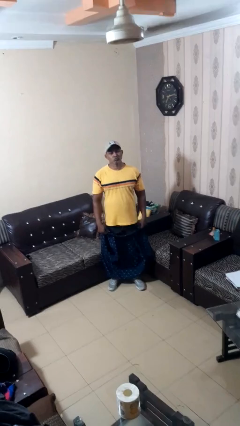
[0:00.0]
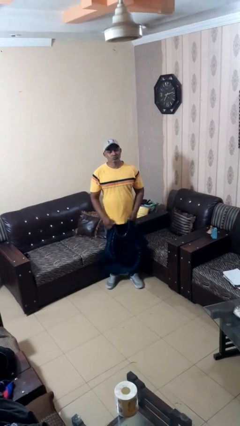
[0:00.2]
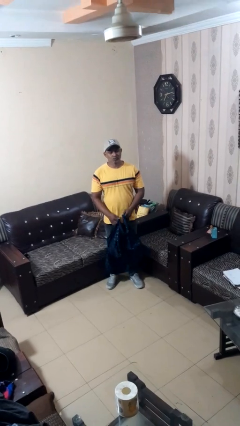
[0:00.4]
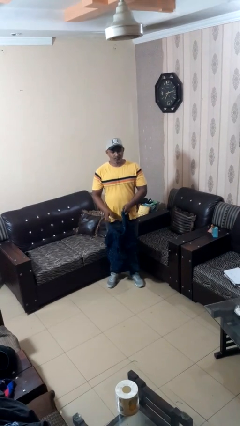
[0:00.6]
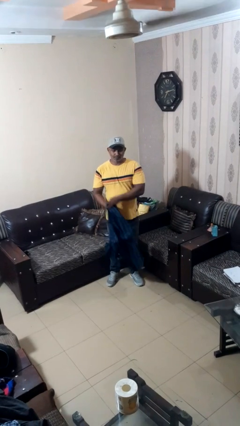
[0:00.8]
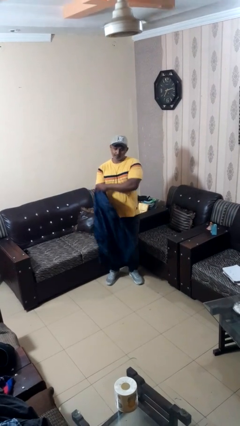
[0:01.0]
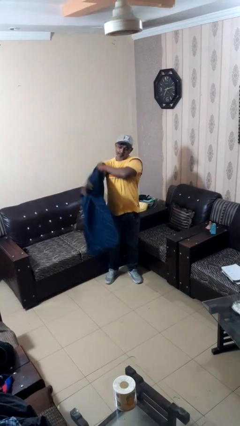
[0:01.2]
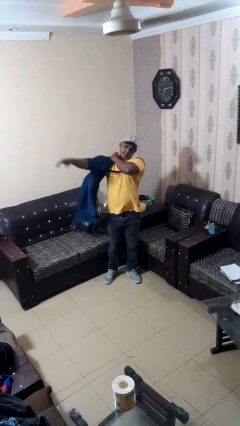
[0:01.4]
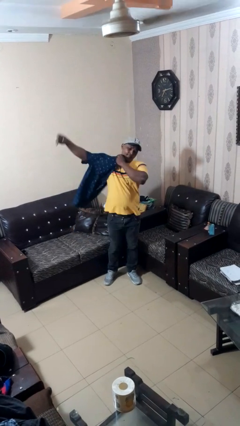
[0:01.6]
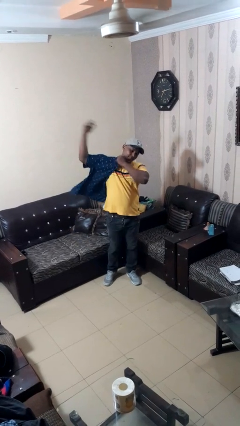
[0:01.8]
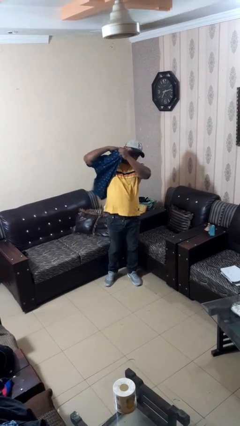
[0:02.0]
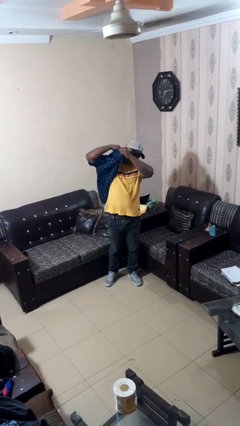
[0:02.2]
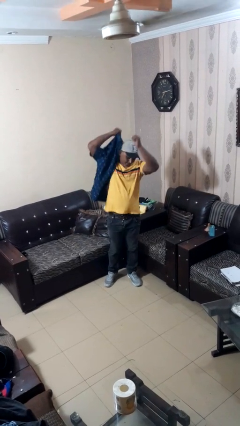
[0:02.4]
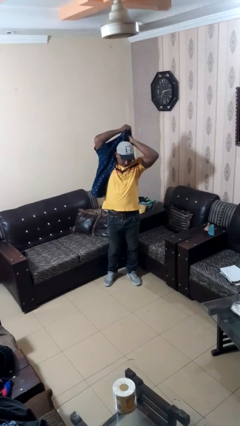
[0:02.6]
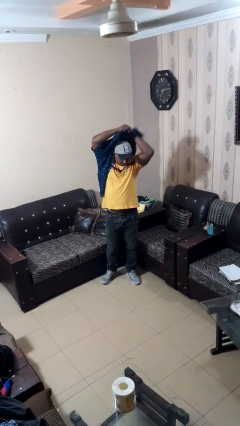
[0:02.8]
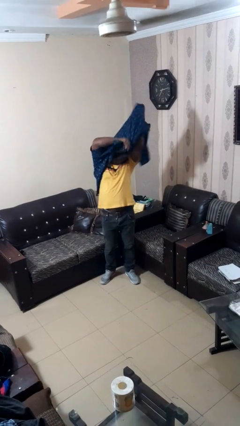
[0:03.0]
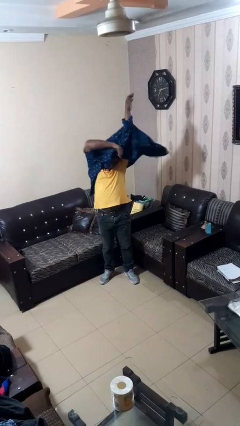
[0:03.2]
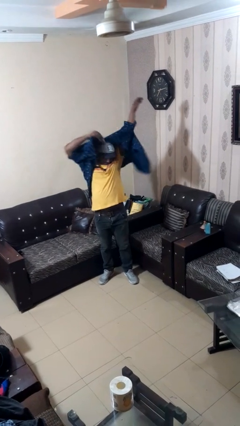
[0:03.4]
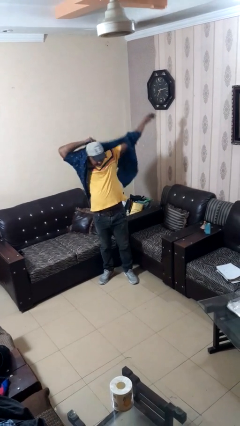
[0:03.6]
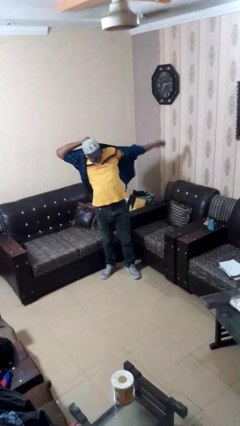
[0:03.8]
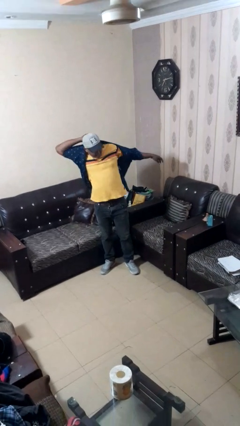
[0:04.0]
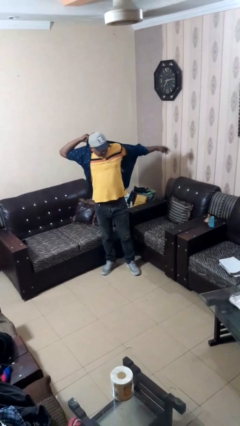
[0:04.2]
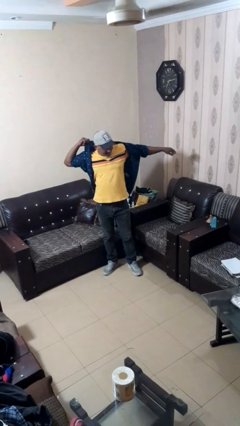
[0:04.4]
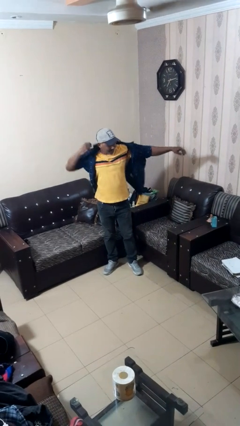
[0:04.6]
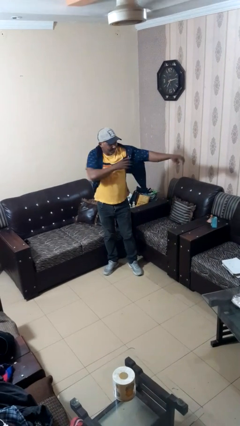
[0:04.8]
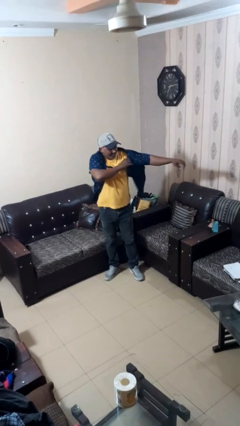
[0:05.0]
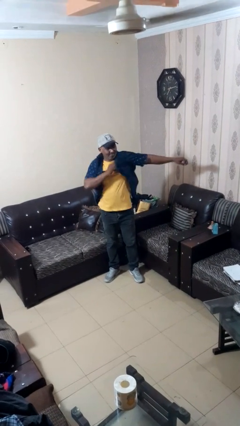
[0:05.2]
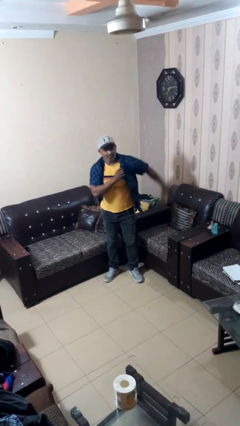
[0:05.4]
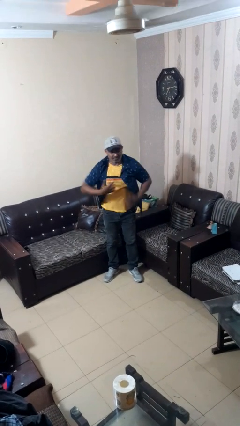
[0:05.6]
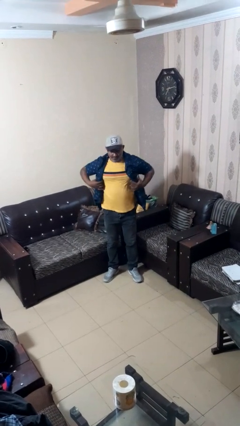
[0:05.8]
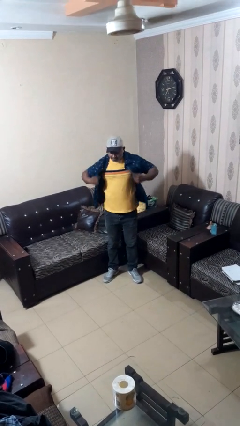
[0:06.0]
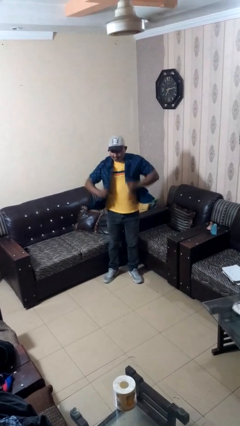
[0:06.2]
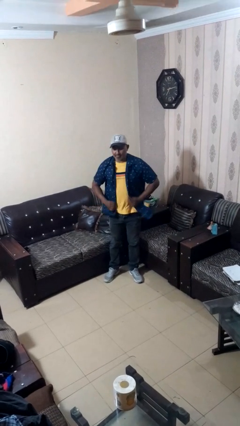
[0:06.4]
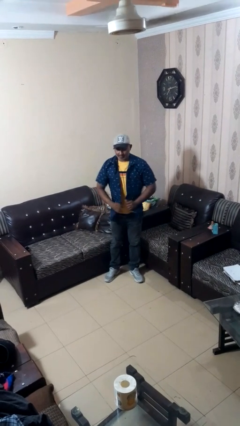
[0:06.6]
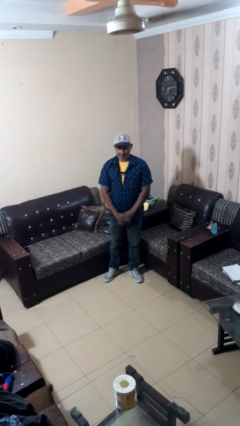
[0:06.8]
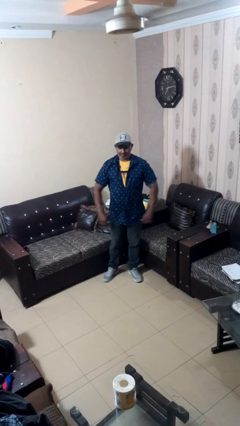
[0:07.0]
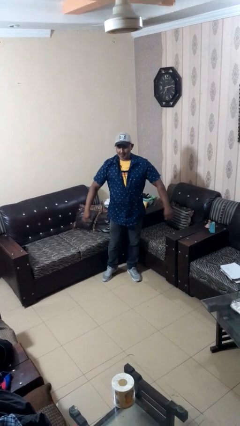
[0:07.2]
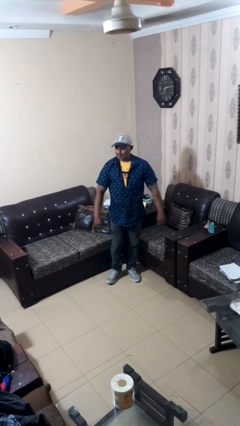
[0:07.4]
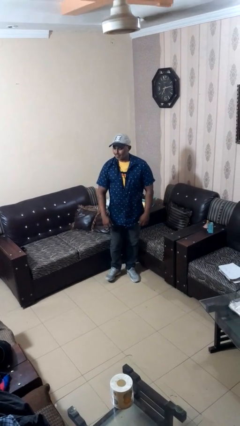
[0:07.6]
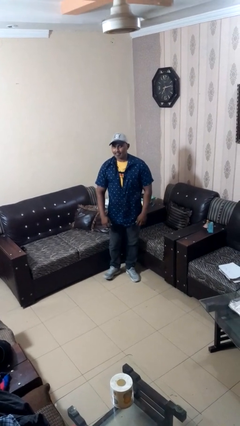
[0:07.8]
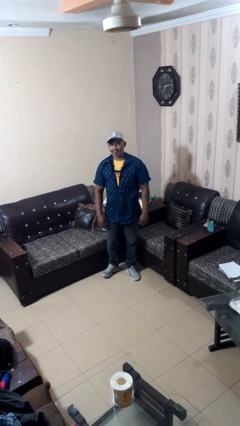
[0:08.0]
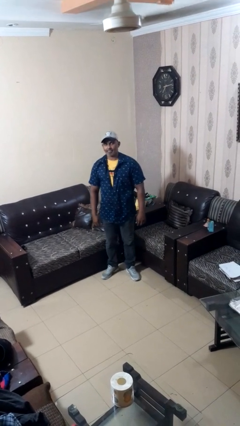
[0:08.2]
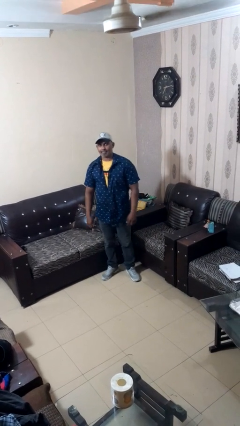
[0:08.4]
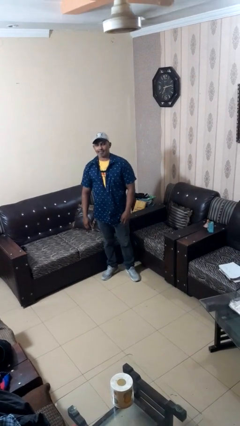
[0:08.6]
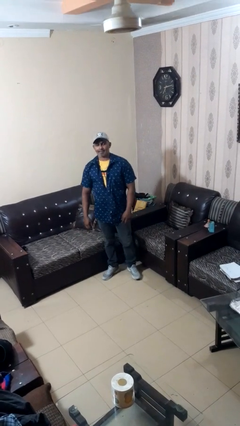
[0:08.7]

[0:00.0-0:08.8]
person puts on shirt

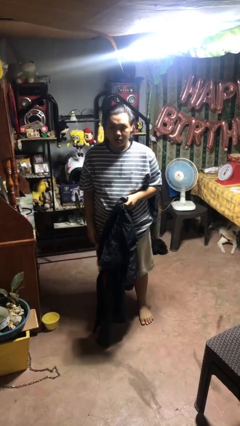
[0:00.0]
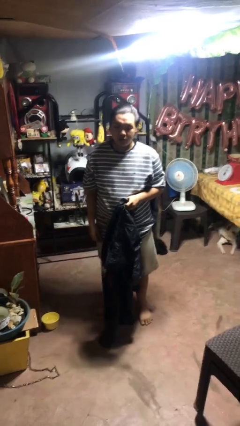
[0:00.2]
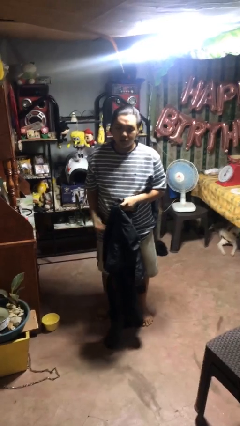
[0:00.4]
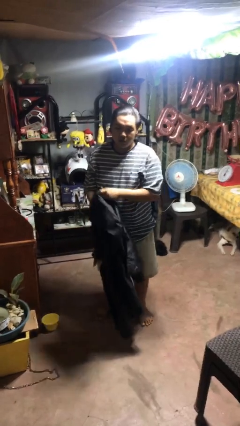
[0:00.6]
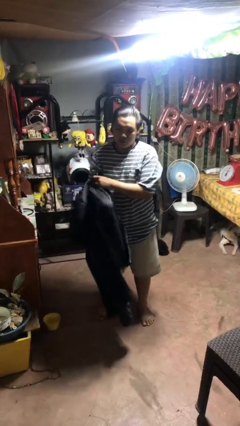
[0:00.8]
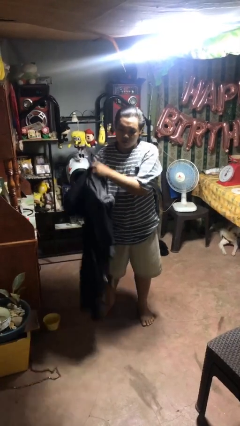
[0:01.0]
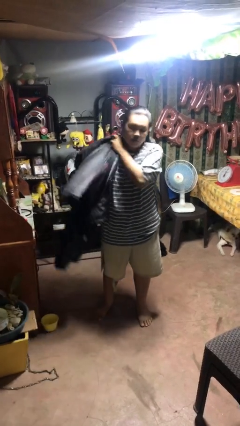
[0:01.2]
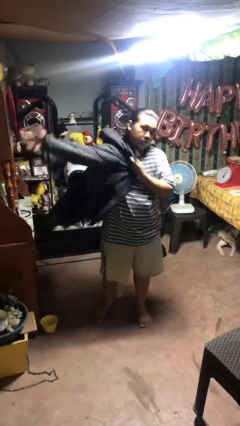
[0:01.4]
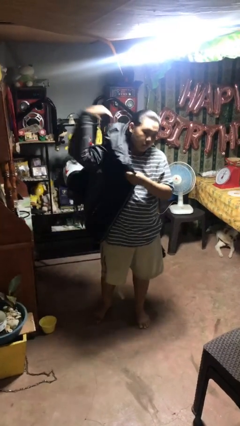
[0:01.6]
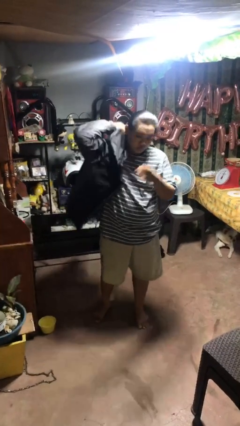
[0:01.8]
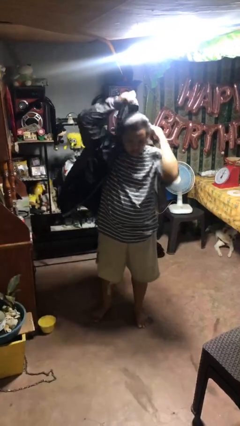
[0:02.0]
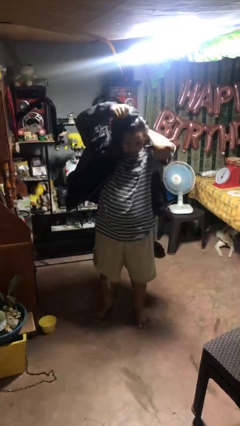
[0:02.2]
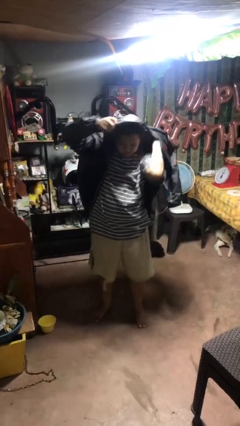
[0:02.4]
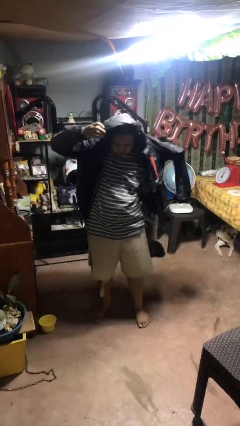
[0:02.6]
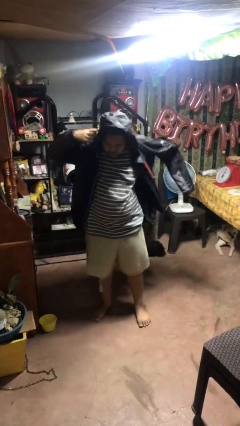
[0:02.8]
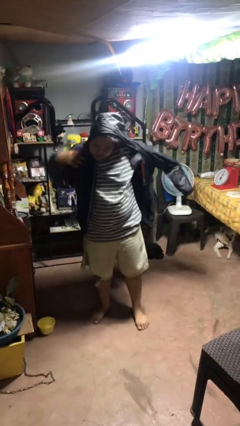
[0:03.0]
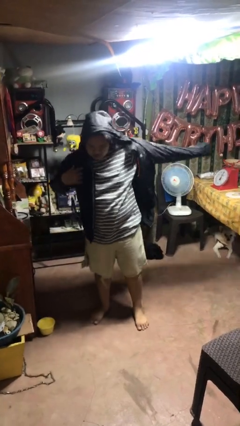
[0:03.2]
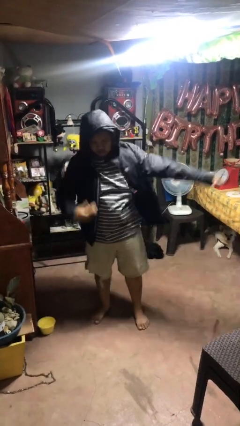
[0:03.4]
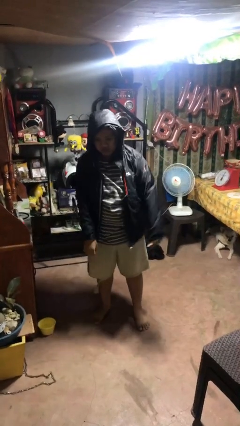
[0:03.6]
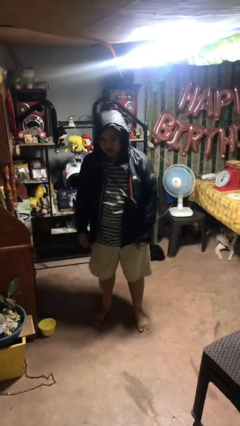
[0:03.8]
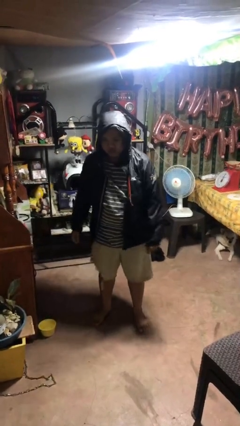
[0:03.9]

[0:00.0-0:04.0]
person puts on hoodie

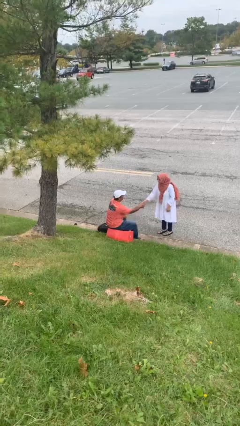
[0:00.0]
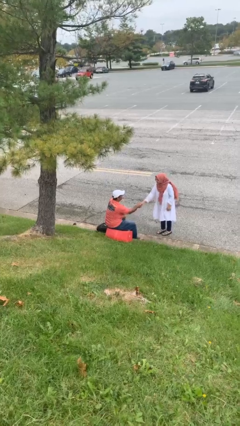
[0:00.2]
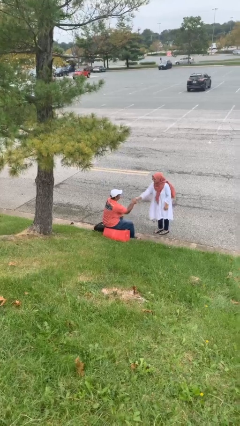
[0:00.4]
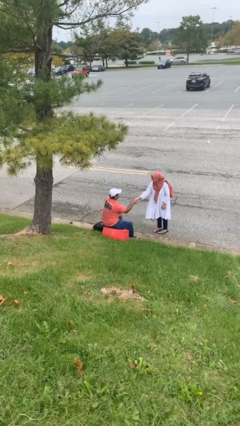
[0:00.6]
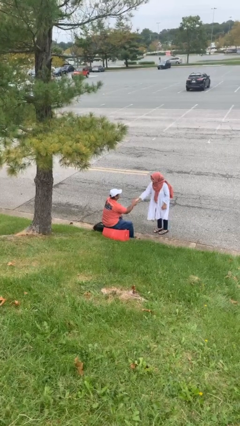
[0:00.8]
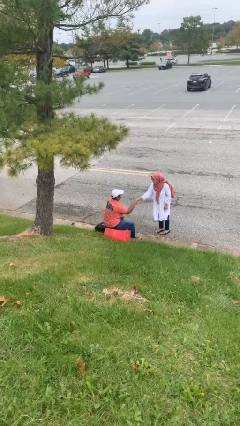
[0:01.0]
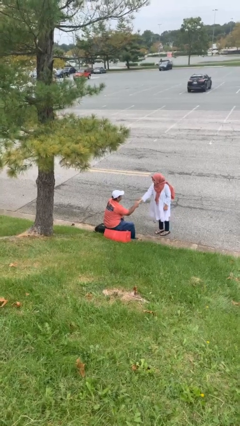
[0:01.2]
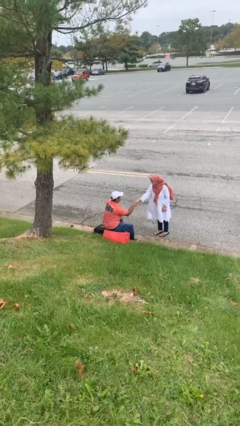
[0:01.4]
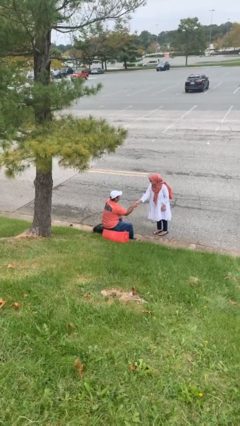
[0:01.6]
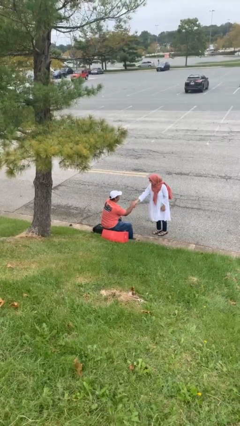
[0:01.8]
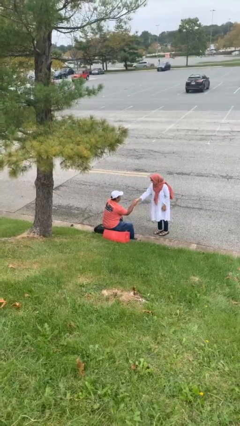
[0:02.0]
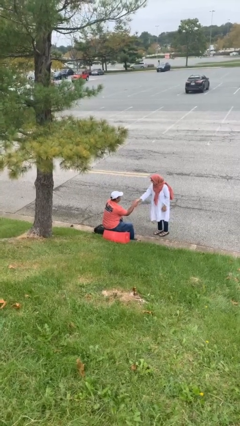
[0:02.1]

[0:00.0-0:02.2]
person shakes hand

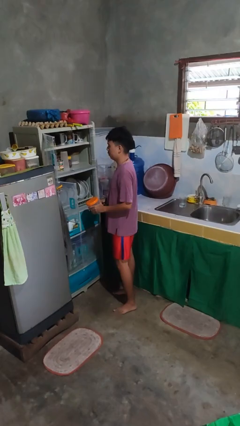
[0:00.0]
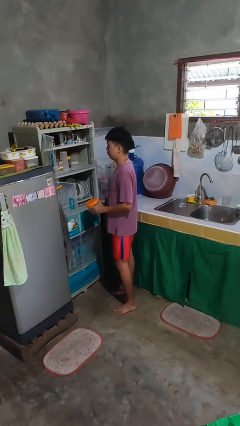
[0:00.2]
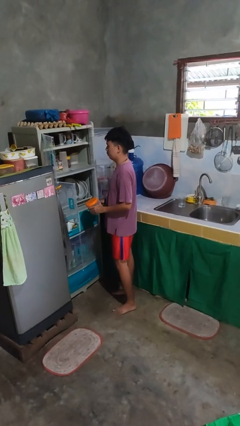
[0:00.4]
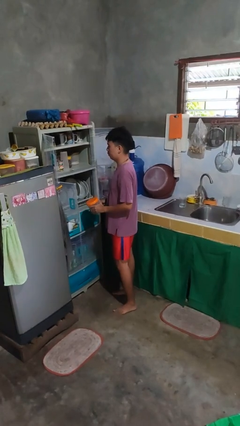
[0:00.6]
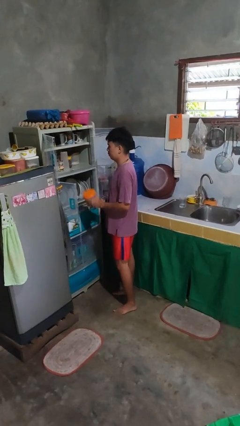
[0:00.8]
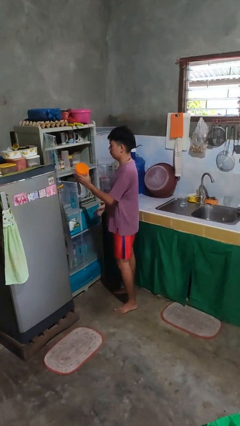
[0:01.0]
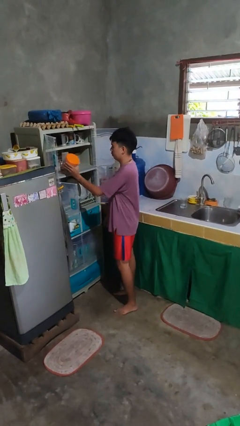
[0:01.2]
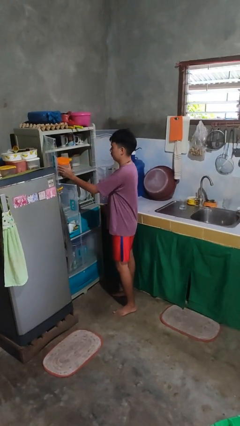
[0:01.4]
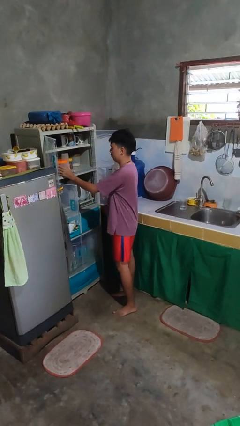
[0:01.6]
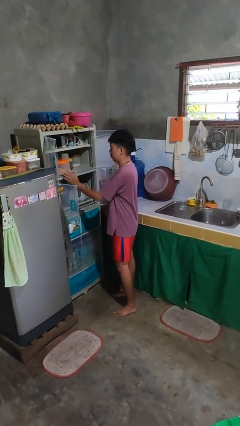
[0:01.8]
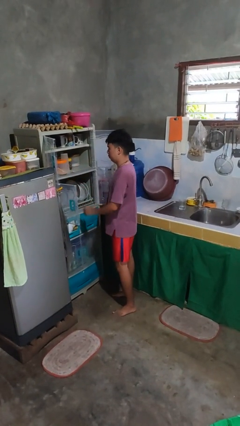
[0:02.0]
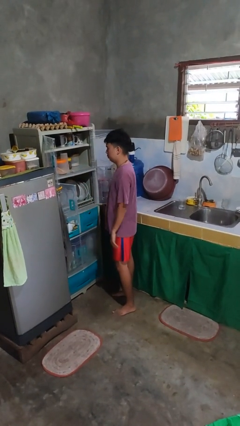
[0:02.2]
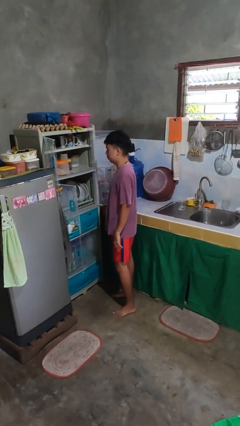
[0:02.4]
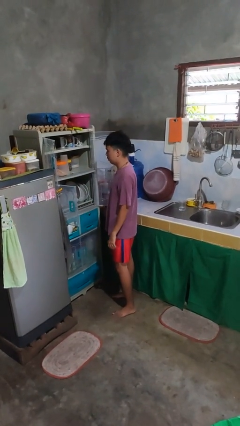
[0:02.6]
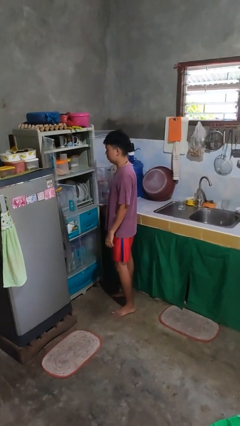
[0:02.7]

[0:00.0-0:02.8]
person puts object in cabinet
